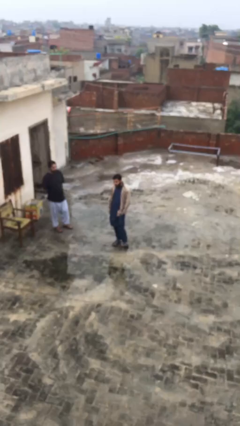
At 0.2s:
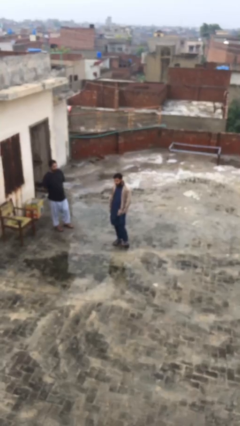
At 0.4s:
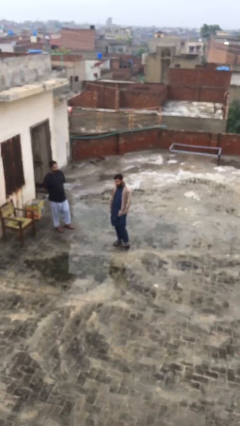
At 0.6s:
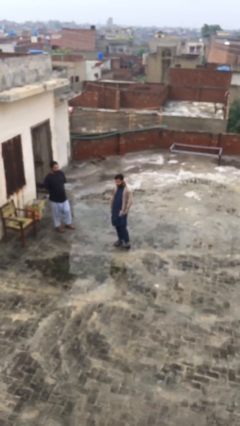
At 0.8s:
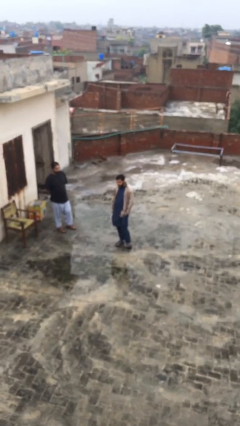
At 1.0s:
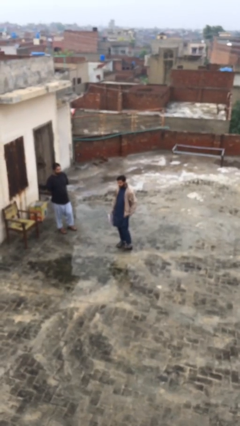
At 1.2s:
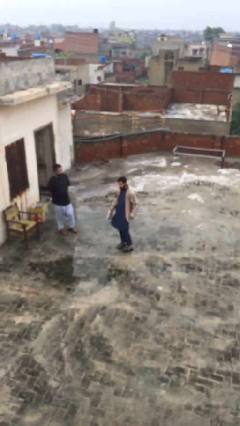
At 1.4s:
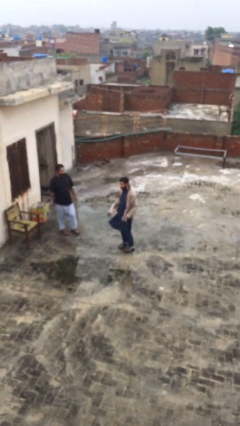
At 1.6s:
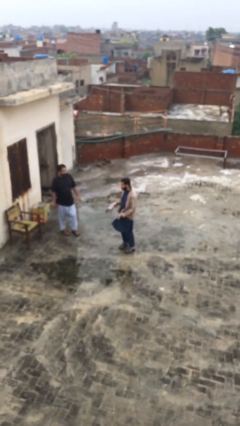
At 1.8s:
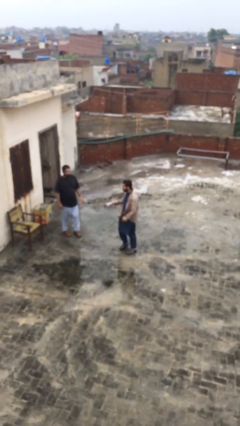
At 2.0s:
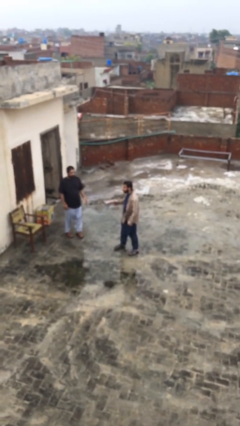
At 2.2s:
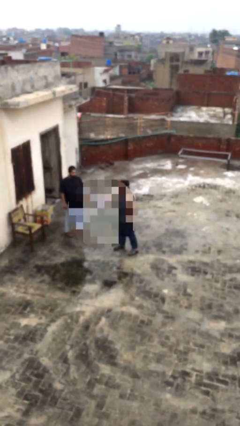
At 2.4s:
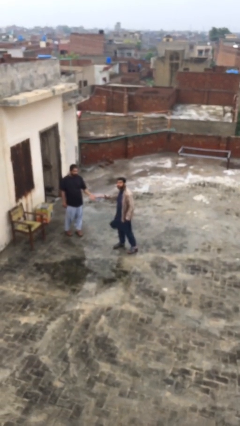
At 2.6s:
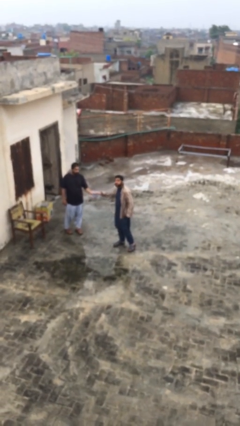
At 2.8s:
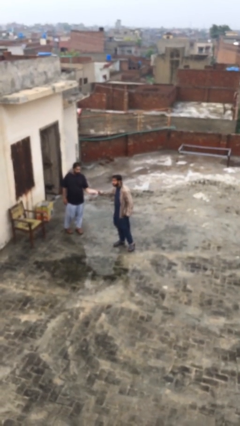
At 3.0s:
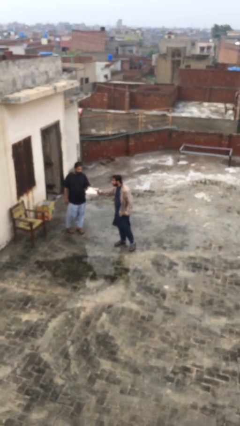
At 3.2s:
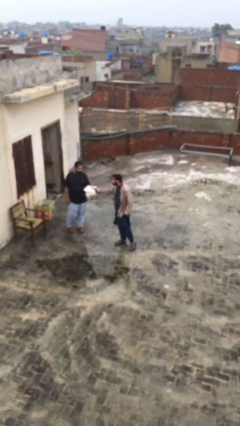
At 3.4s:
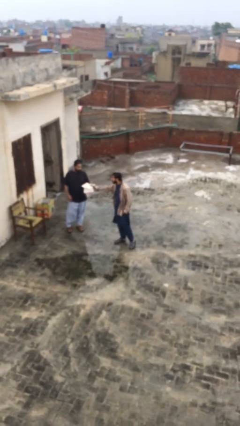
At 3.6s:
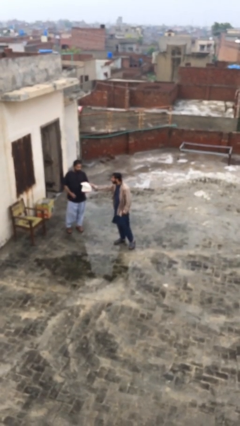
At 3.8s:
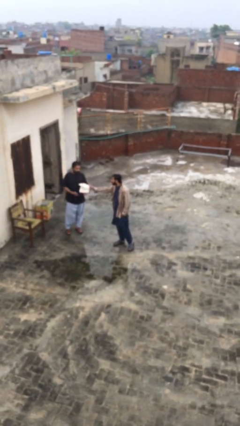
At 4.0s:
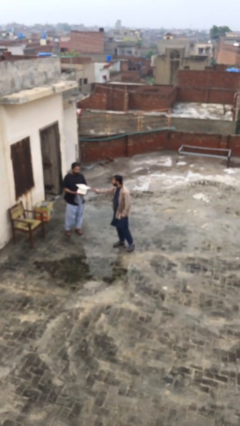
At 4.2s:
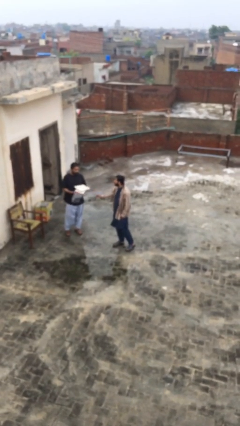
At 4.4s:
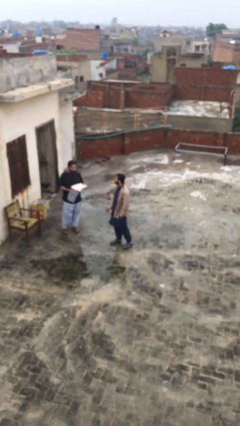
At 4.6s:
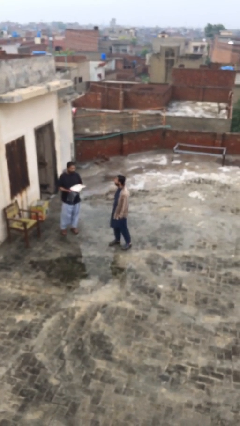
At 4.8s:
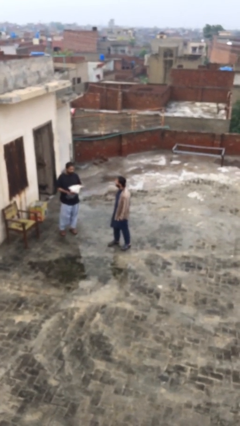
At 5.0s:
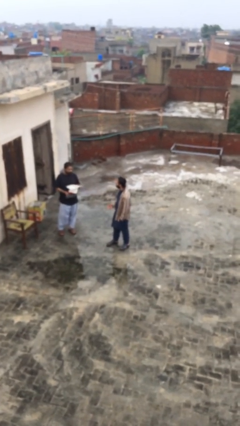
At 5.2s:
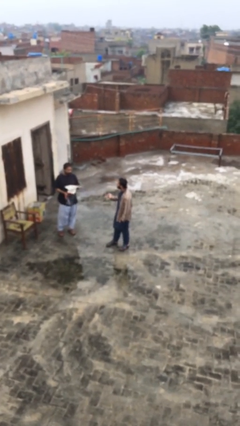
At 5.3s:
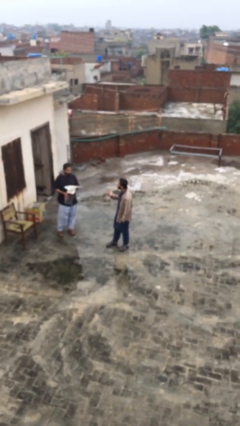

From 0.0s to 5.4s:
person transfers object to person

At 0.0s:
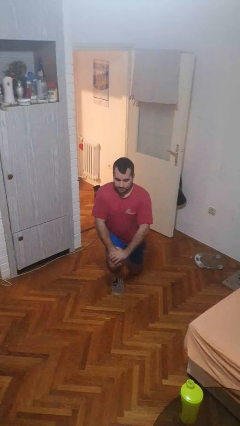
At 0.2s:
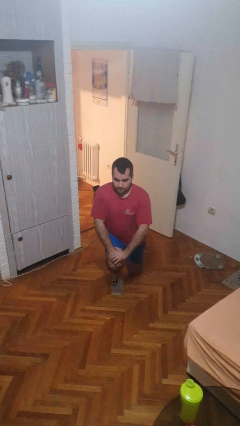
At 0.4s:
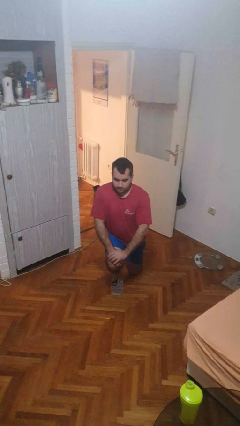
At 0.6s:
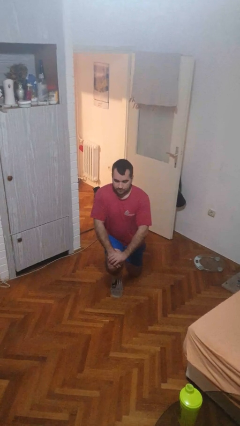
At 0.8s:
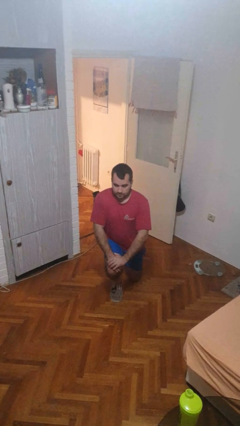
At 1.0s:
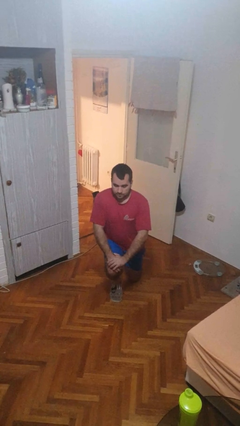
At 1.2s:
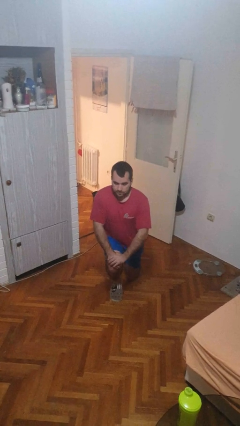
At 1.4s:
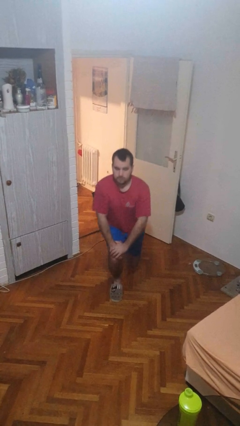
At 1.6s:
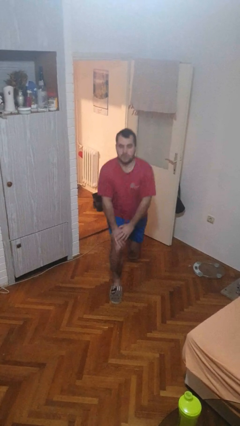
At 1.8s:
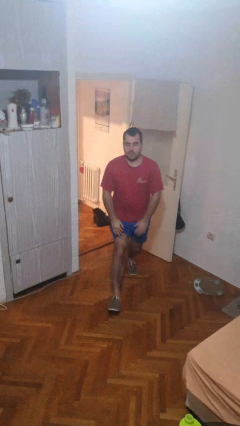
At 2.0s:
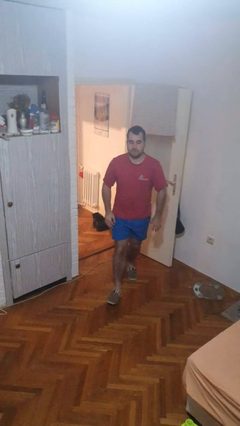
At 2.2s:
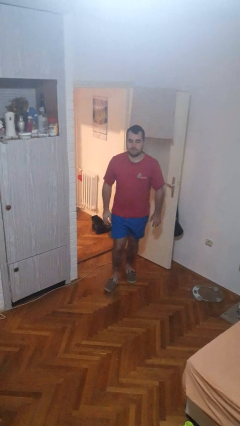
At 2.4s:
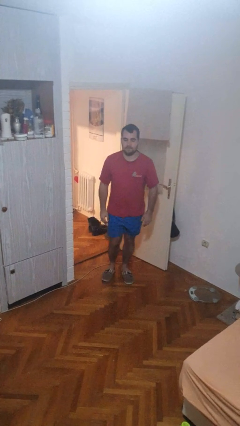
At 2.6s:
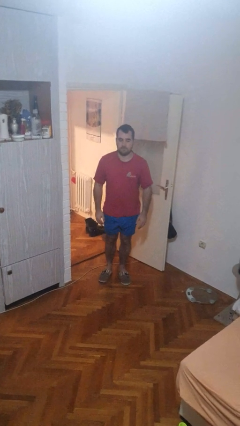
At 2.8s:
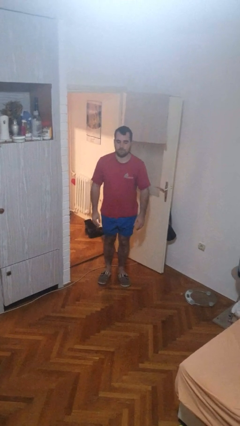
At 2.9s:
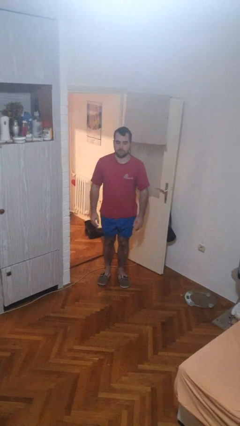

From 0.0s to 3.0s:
person stands up from floor

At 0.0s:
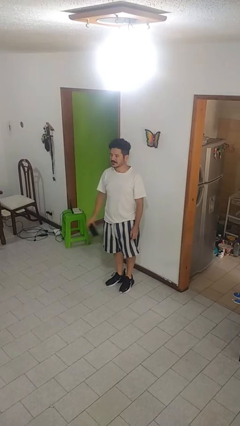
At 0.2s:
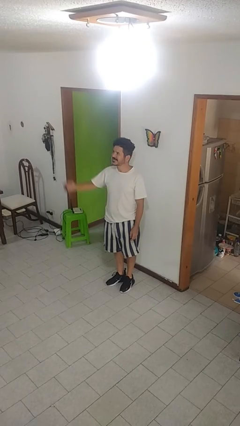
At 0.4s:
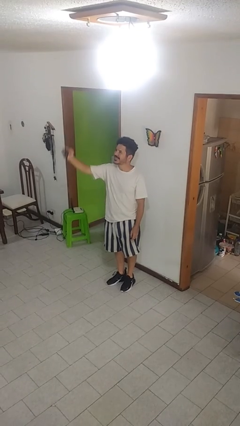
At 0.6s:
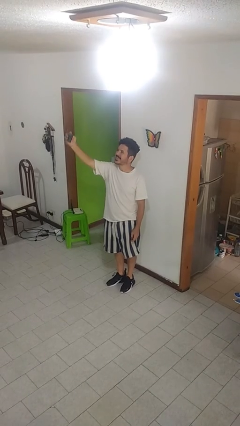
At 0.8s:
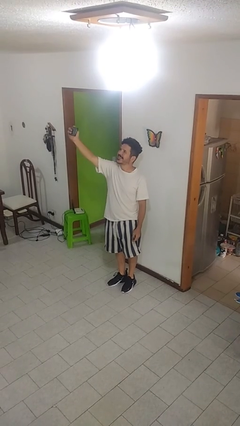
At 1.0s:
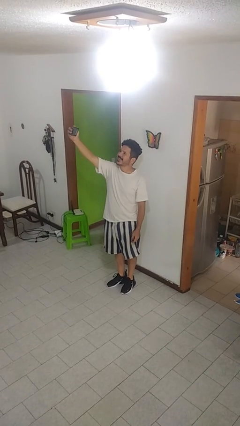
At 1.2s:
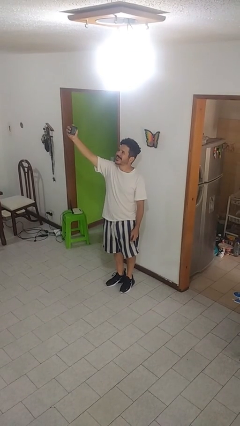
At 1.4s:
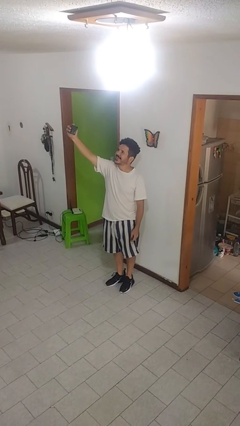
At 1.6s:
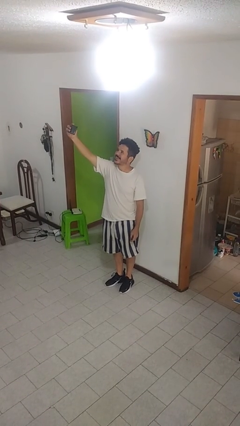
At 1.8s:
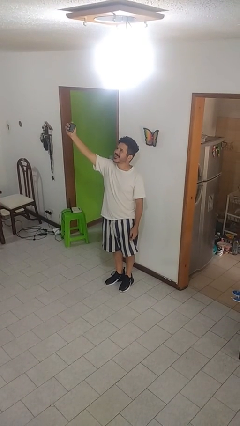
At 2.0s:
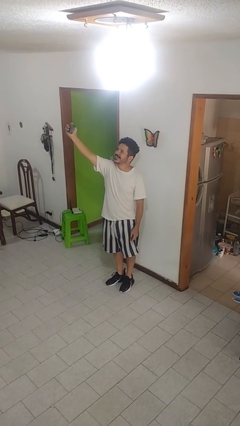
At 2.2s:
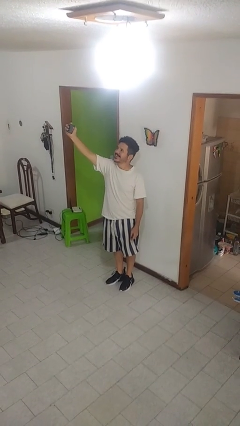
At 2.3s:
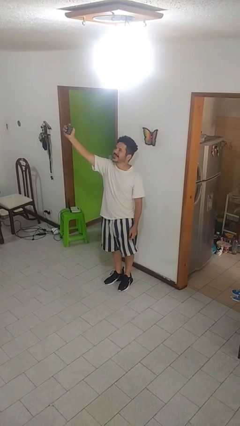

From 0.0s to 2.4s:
person takes selfie

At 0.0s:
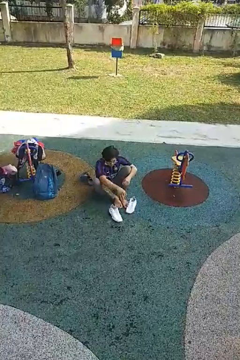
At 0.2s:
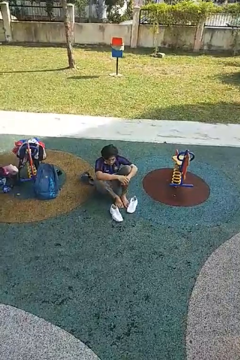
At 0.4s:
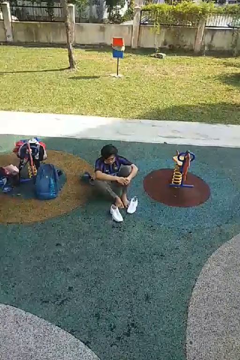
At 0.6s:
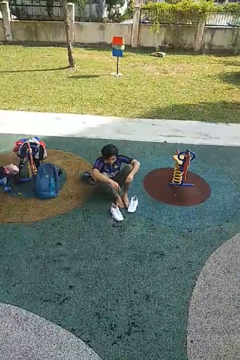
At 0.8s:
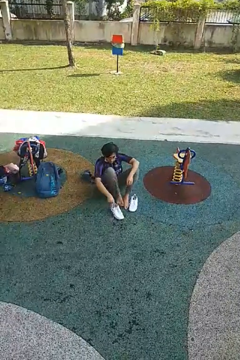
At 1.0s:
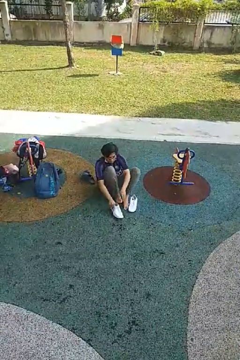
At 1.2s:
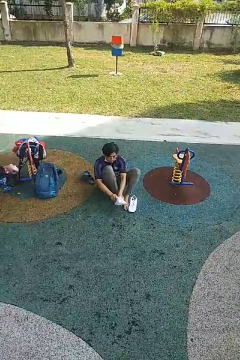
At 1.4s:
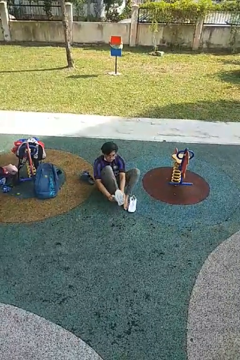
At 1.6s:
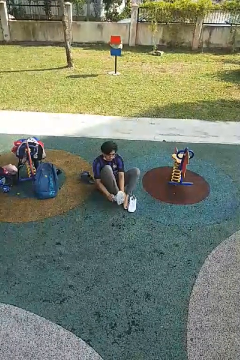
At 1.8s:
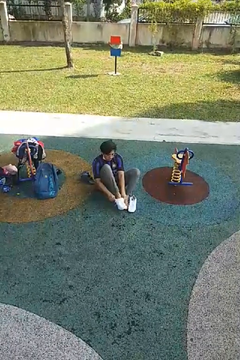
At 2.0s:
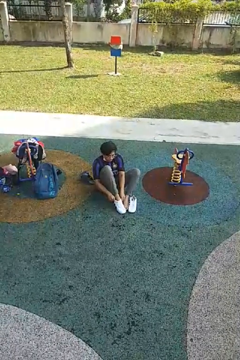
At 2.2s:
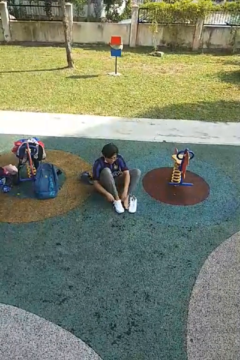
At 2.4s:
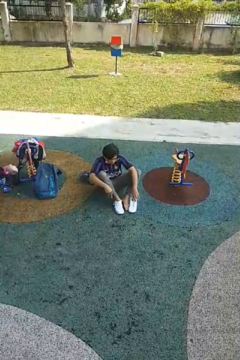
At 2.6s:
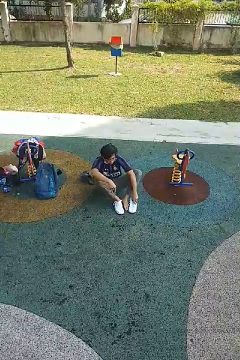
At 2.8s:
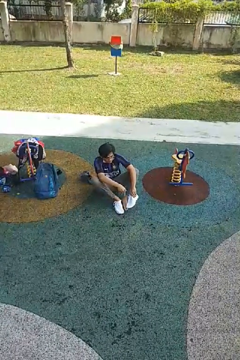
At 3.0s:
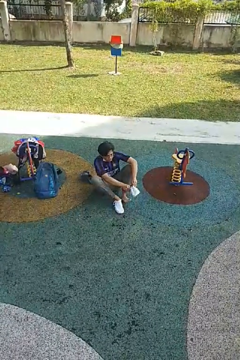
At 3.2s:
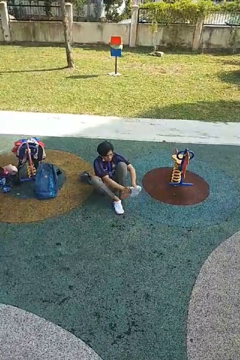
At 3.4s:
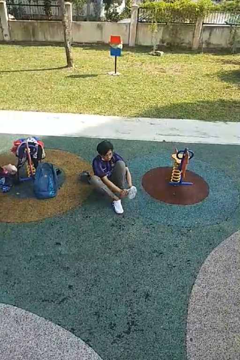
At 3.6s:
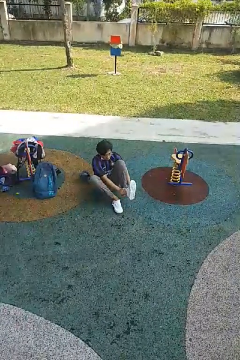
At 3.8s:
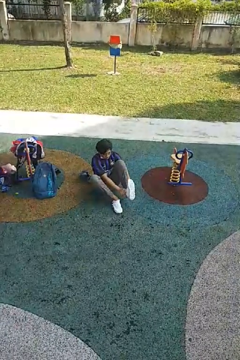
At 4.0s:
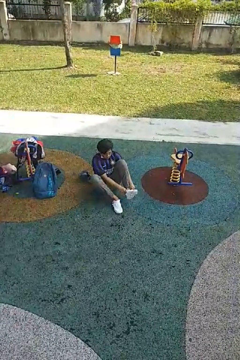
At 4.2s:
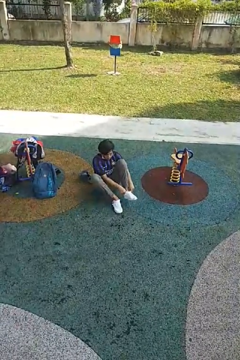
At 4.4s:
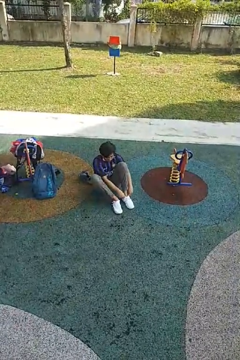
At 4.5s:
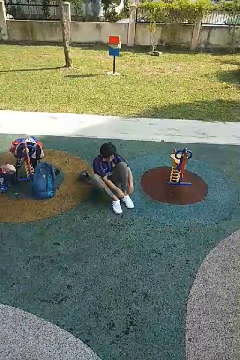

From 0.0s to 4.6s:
person puts on shoes

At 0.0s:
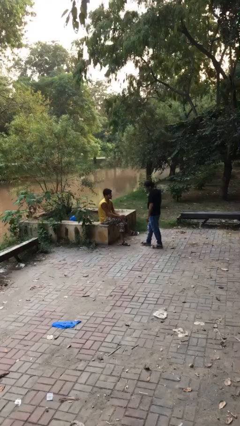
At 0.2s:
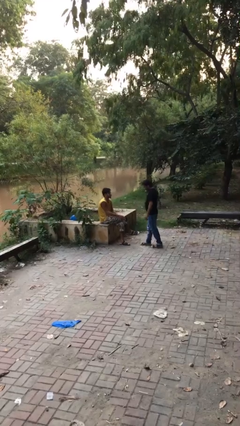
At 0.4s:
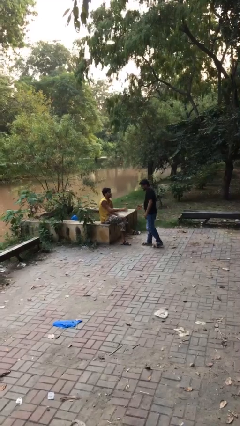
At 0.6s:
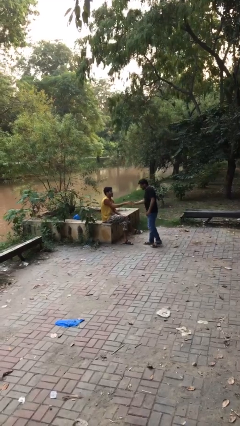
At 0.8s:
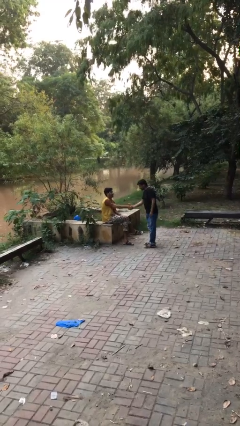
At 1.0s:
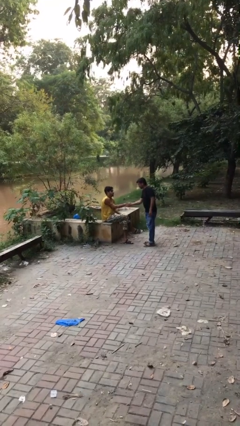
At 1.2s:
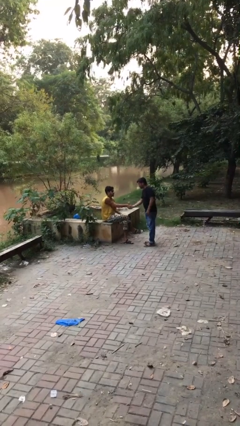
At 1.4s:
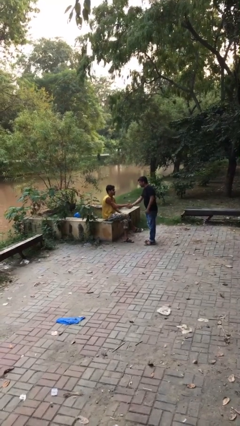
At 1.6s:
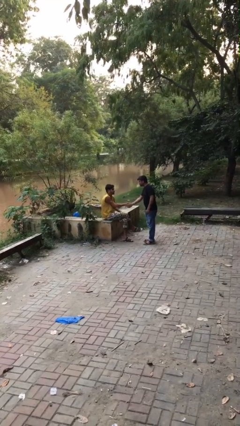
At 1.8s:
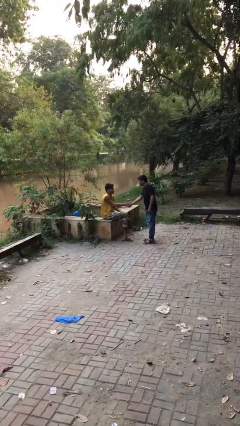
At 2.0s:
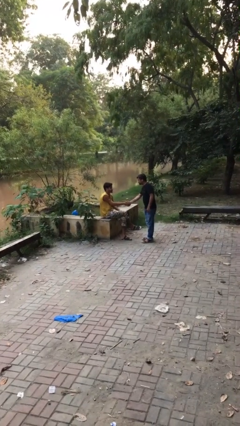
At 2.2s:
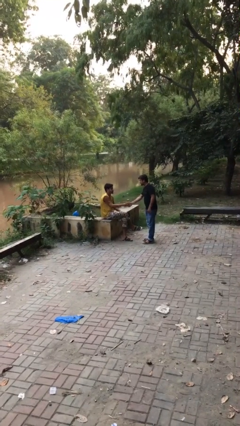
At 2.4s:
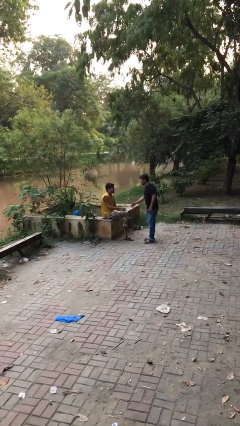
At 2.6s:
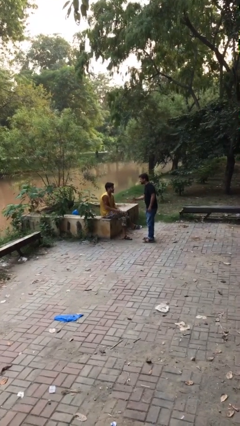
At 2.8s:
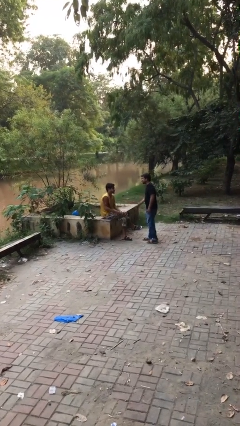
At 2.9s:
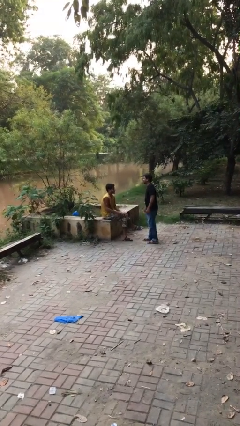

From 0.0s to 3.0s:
person shakes hand
